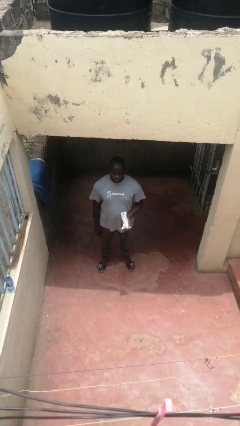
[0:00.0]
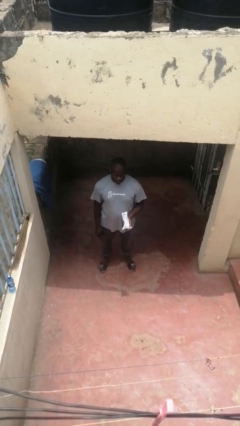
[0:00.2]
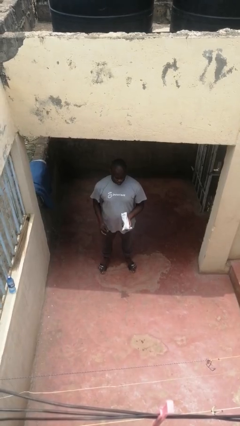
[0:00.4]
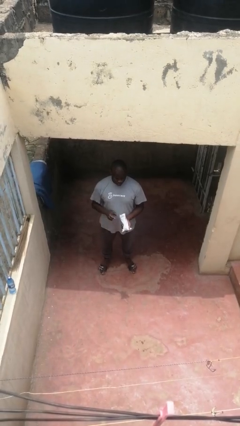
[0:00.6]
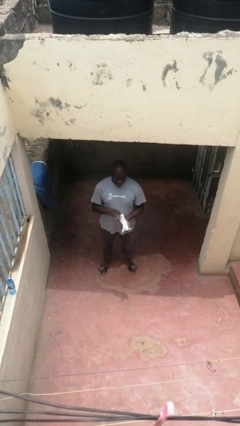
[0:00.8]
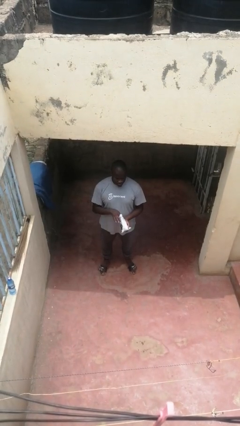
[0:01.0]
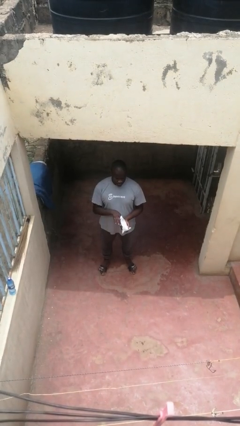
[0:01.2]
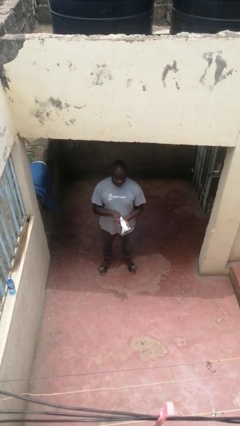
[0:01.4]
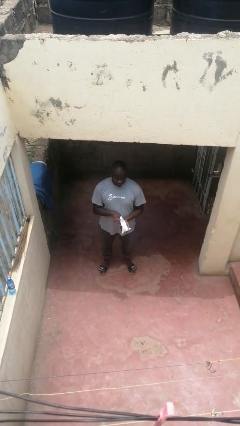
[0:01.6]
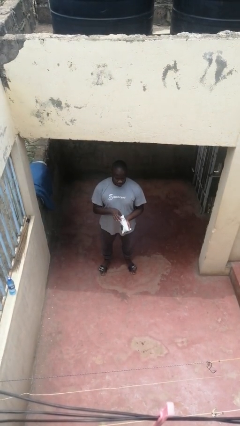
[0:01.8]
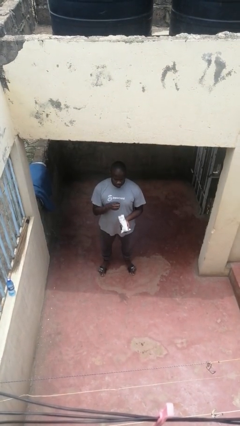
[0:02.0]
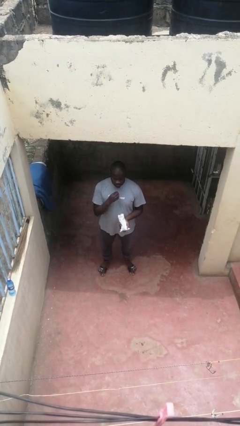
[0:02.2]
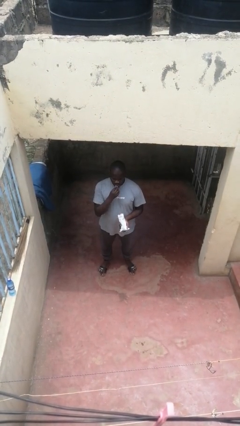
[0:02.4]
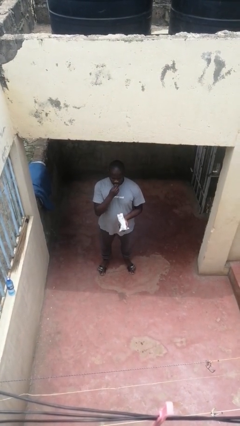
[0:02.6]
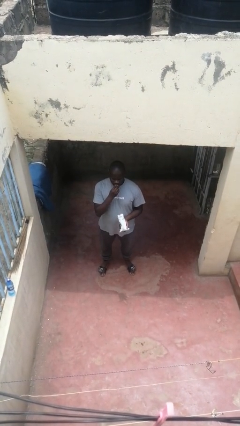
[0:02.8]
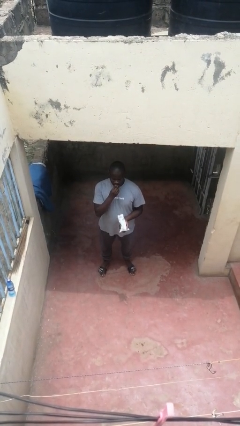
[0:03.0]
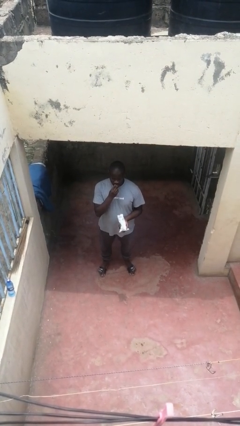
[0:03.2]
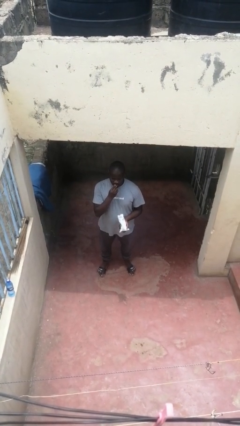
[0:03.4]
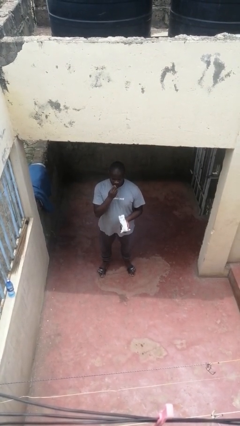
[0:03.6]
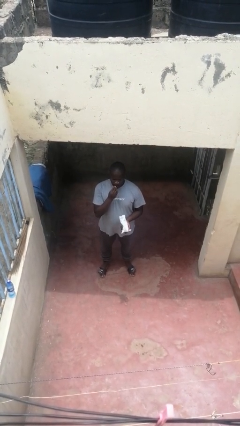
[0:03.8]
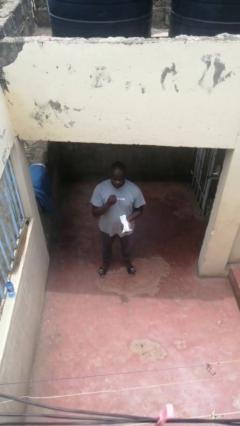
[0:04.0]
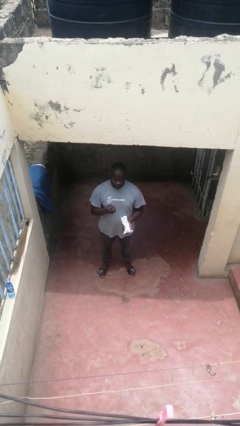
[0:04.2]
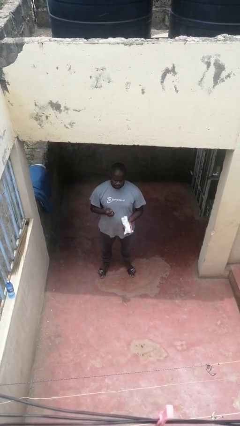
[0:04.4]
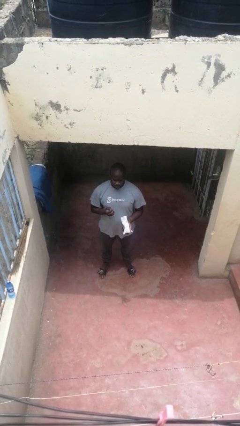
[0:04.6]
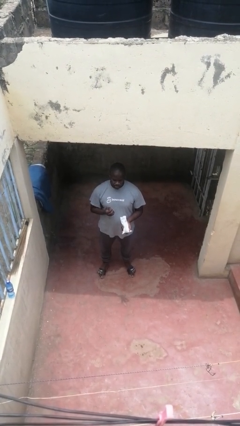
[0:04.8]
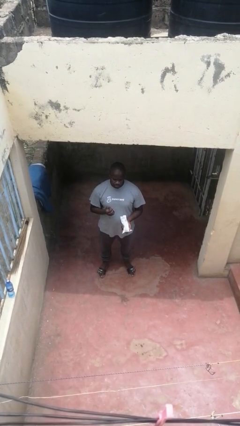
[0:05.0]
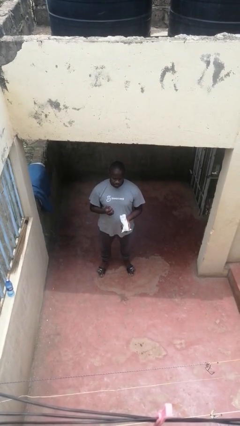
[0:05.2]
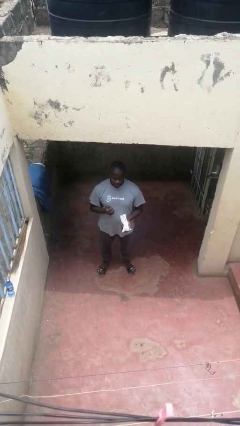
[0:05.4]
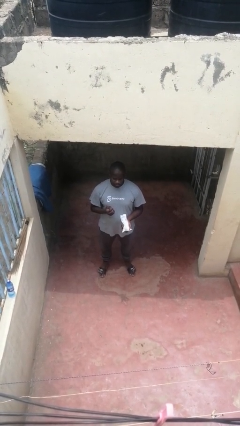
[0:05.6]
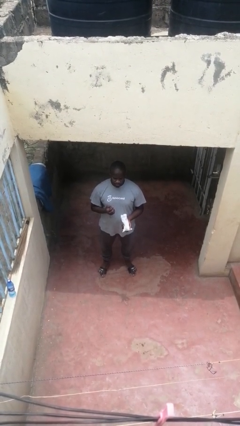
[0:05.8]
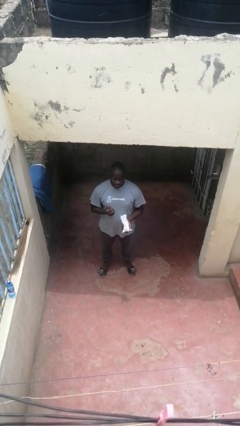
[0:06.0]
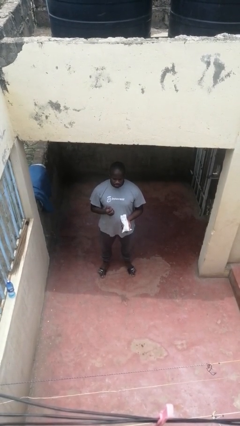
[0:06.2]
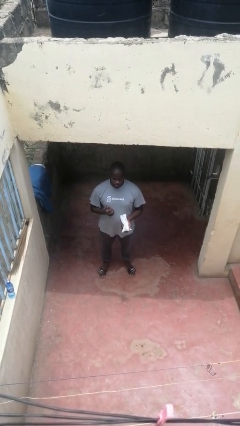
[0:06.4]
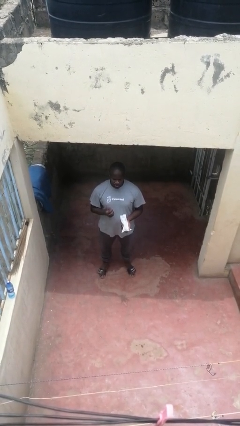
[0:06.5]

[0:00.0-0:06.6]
person eats snack from bag

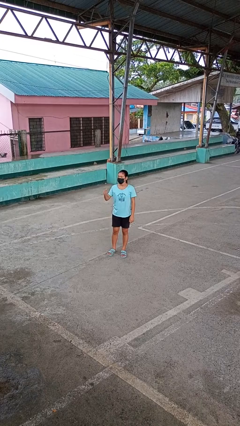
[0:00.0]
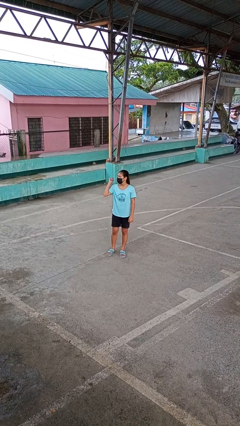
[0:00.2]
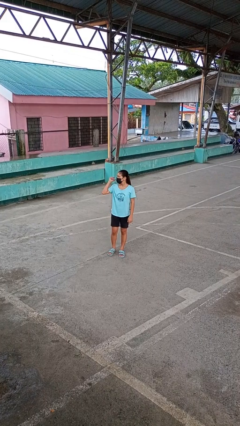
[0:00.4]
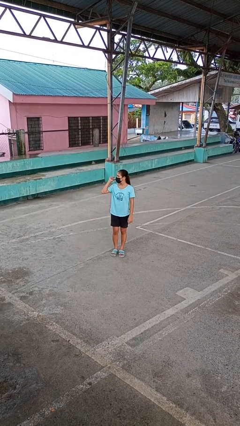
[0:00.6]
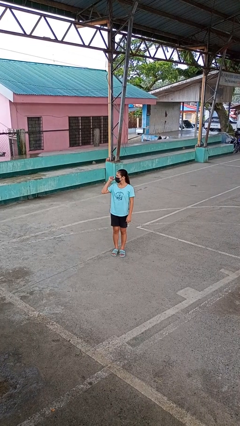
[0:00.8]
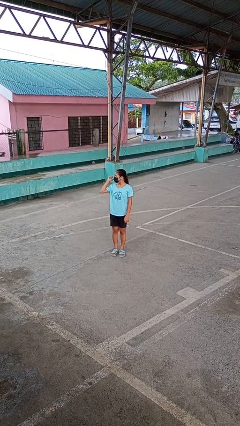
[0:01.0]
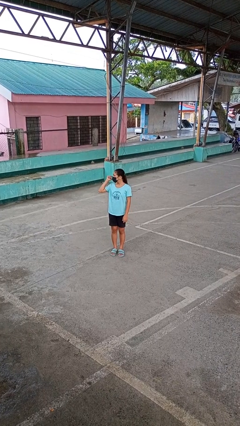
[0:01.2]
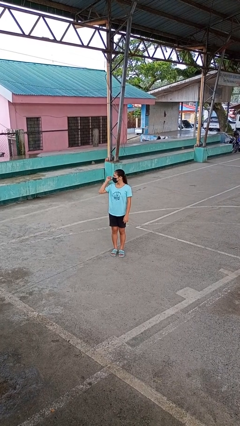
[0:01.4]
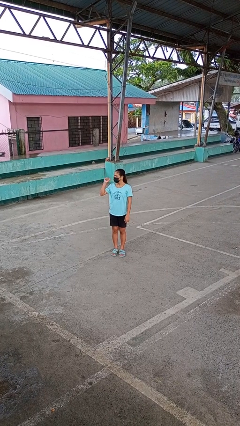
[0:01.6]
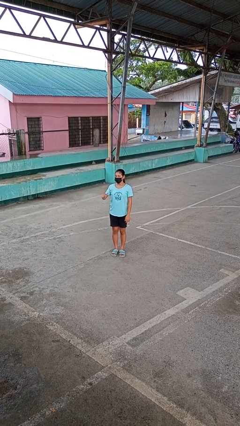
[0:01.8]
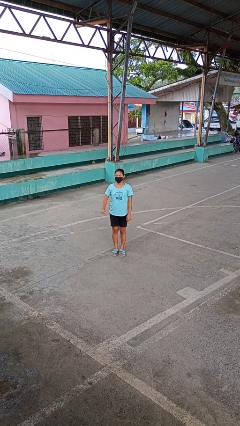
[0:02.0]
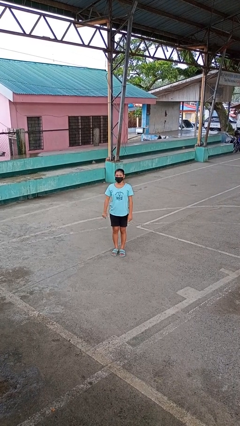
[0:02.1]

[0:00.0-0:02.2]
person gestures behind me

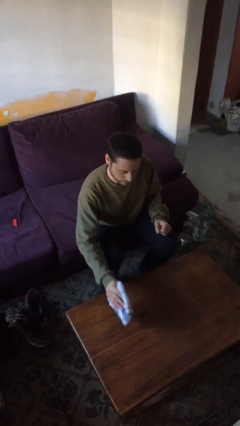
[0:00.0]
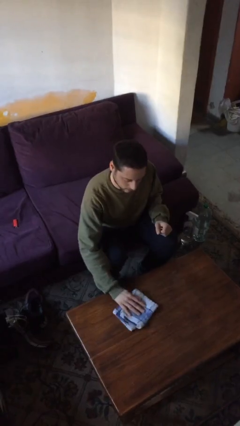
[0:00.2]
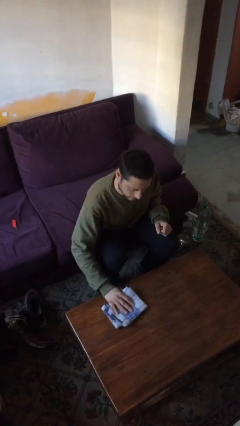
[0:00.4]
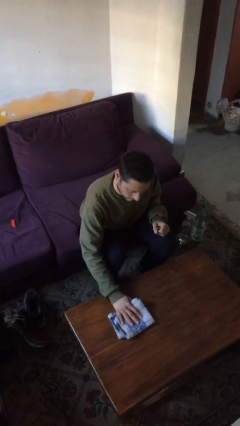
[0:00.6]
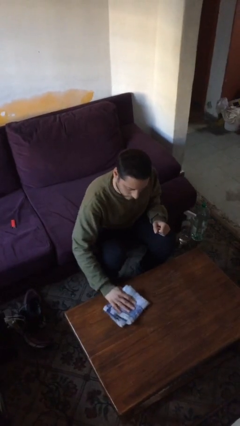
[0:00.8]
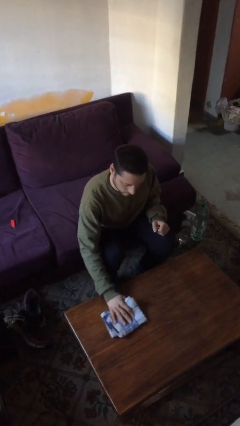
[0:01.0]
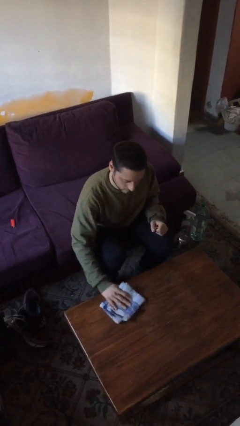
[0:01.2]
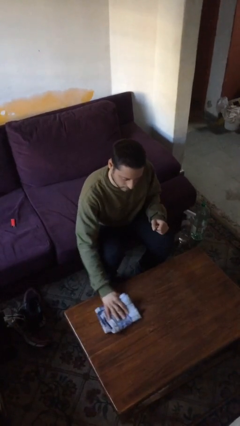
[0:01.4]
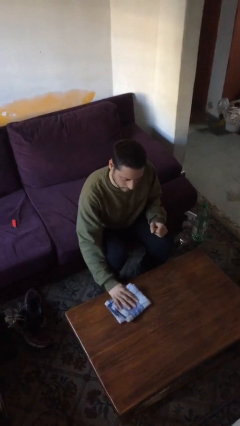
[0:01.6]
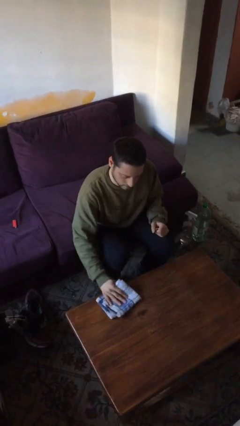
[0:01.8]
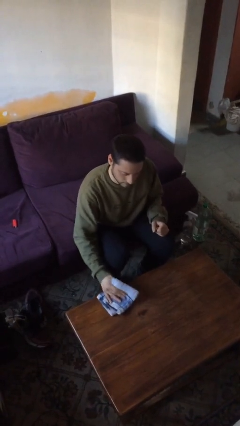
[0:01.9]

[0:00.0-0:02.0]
person cleans table with rag

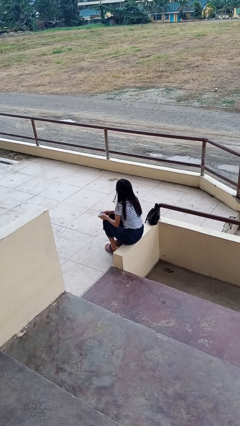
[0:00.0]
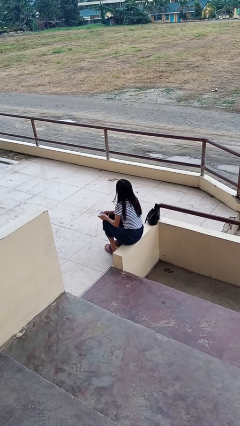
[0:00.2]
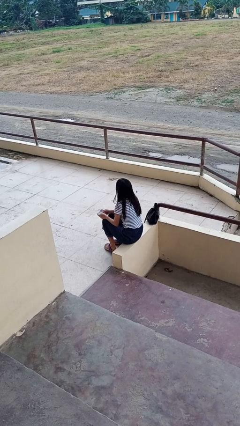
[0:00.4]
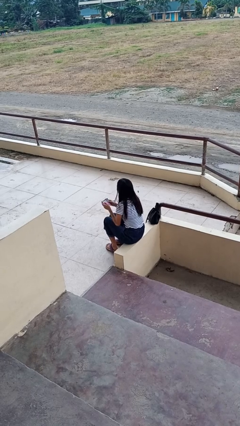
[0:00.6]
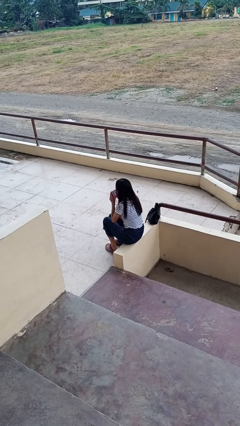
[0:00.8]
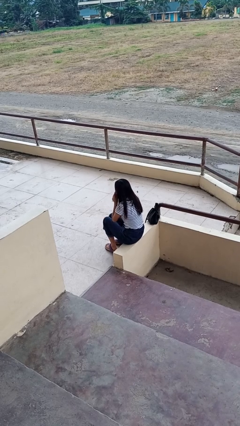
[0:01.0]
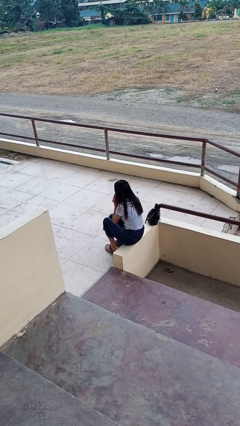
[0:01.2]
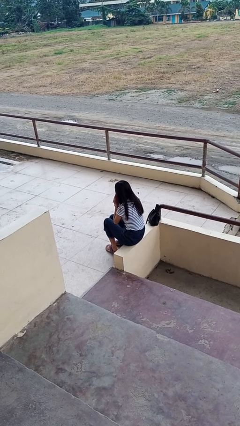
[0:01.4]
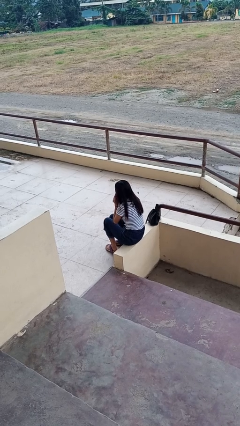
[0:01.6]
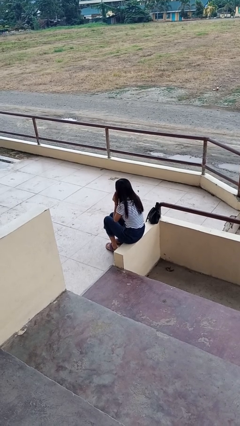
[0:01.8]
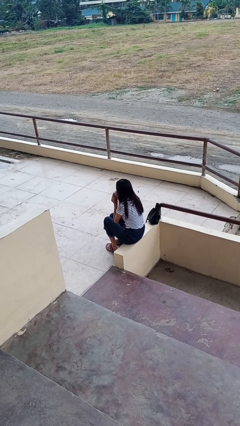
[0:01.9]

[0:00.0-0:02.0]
person blows nose

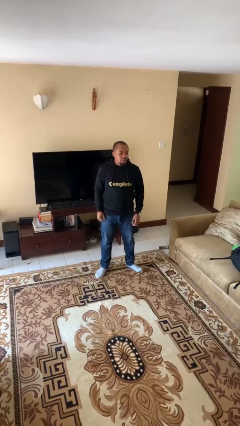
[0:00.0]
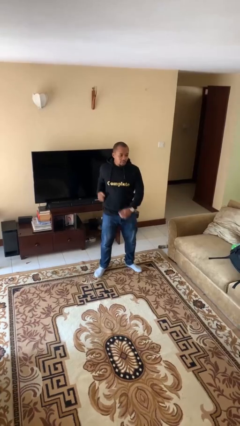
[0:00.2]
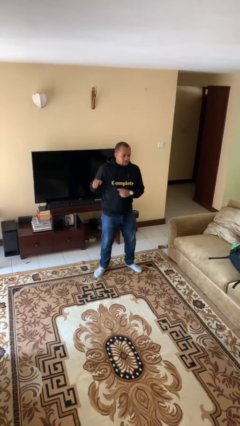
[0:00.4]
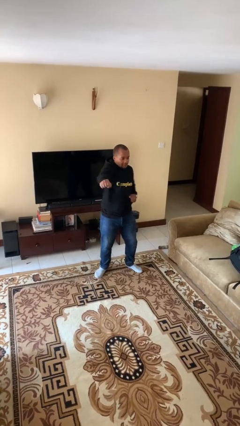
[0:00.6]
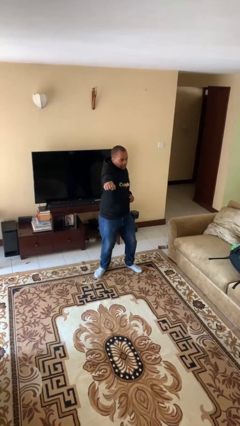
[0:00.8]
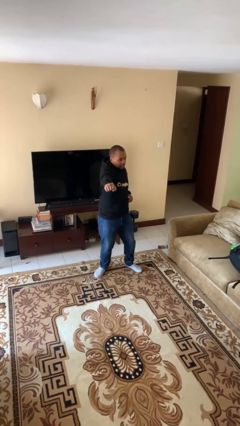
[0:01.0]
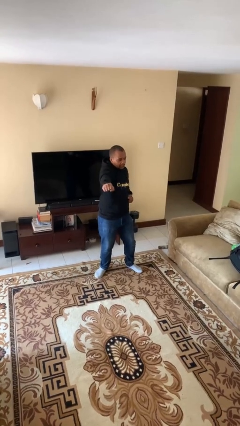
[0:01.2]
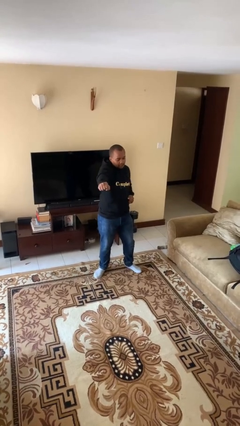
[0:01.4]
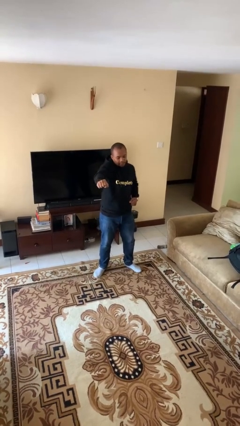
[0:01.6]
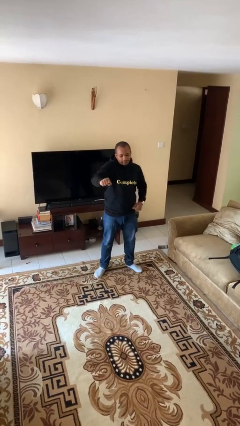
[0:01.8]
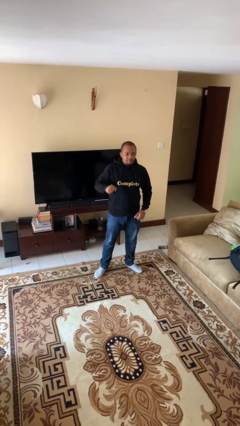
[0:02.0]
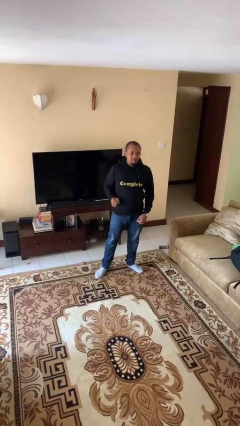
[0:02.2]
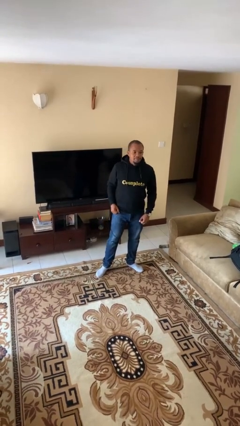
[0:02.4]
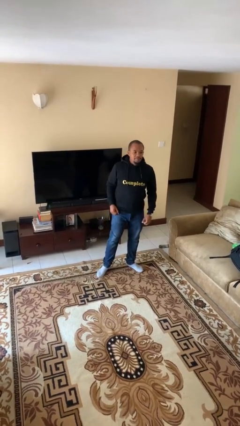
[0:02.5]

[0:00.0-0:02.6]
person punches

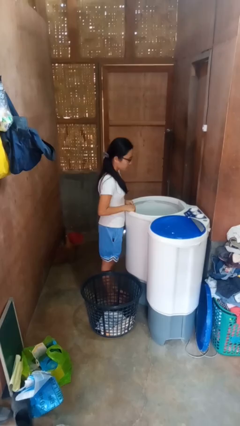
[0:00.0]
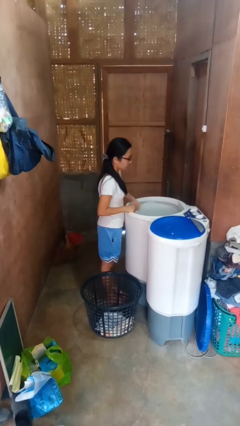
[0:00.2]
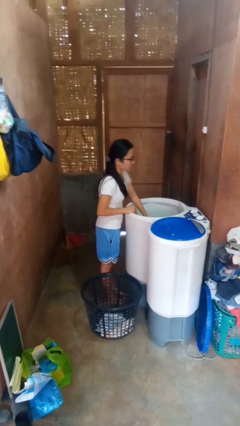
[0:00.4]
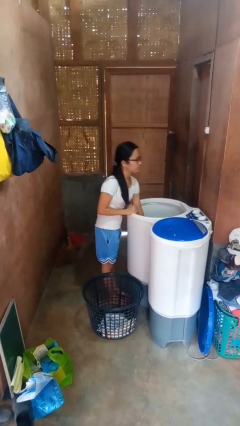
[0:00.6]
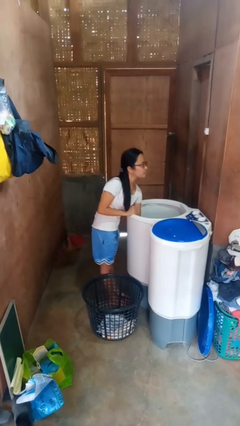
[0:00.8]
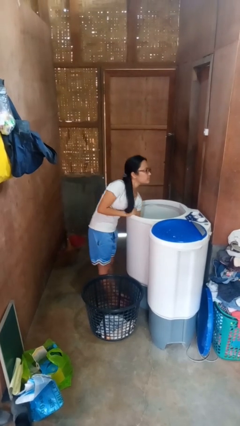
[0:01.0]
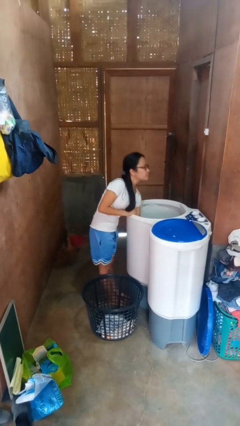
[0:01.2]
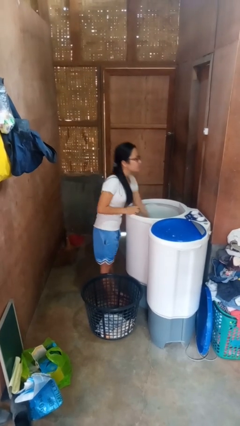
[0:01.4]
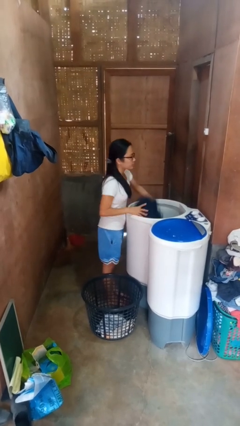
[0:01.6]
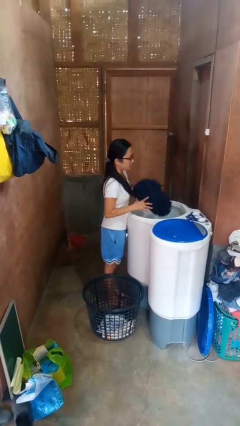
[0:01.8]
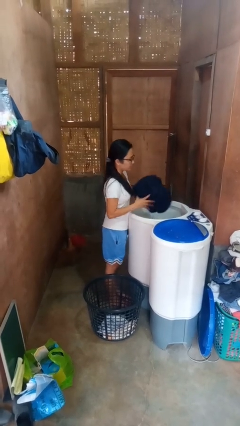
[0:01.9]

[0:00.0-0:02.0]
person unloads clotheswasher
